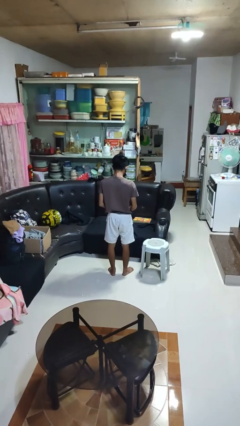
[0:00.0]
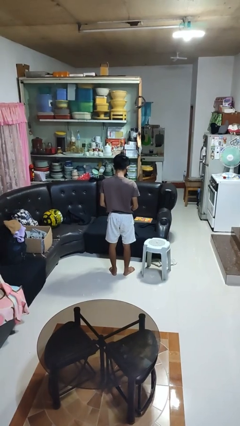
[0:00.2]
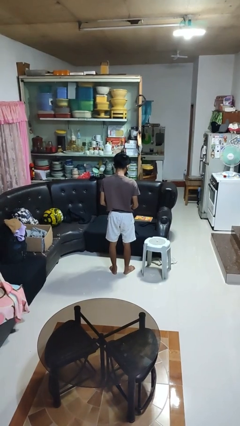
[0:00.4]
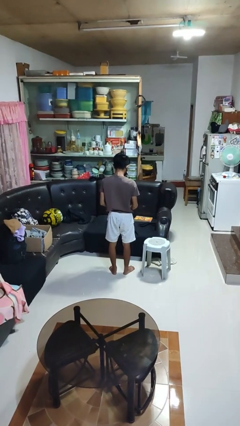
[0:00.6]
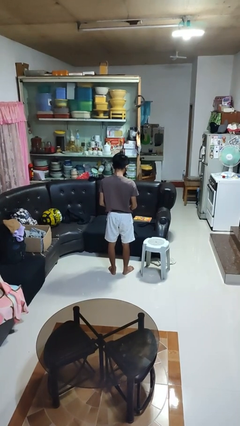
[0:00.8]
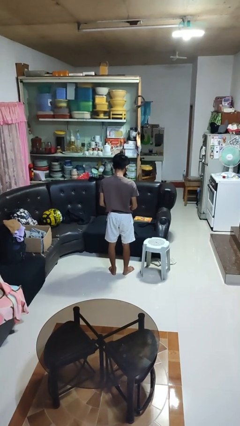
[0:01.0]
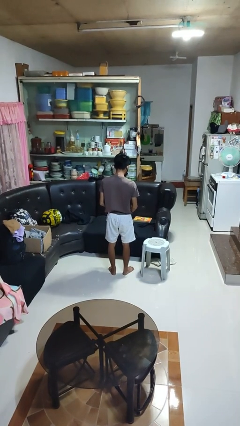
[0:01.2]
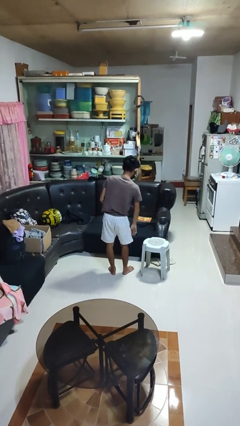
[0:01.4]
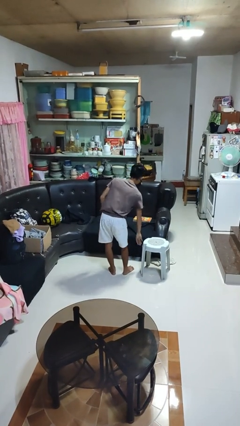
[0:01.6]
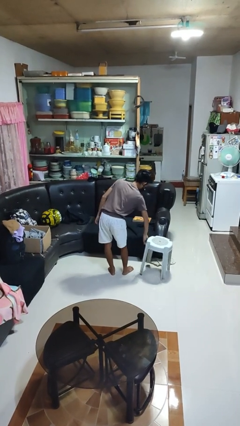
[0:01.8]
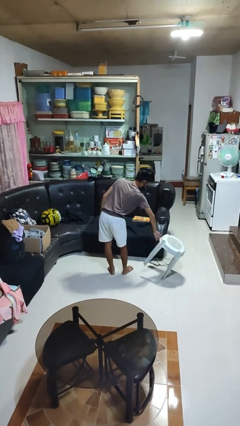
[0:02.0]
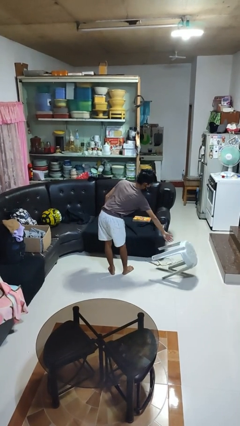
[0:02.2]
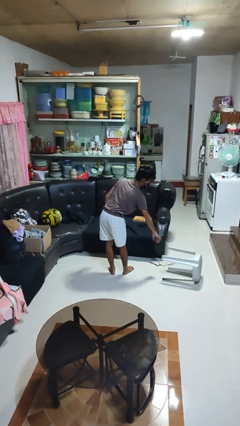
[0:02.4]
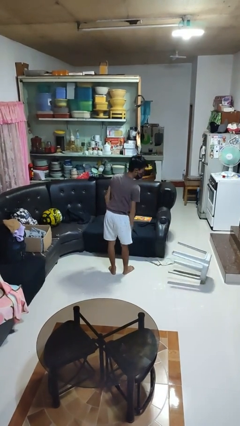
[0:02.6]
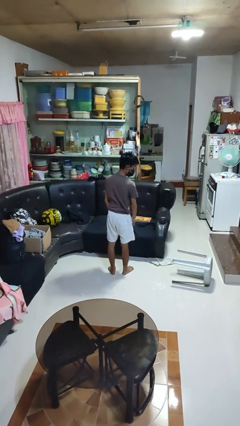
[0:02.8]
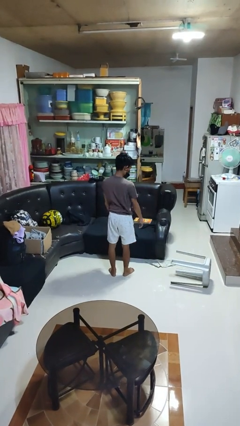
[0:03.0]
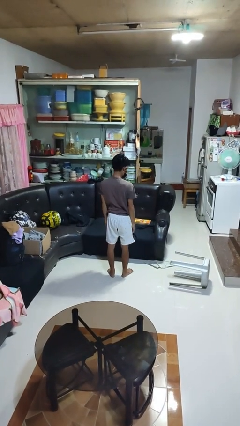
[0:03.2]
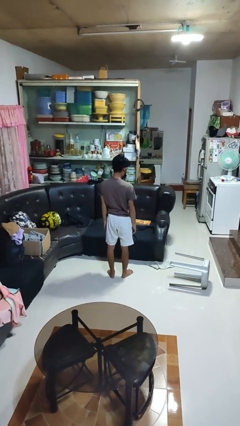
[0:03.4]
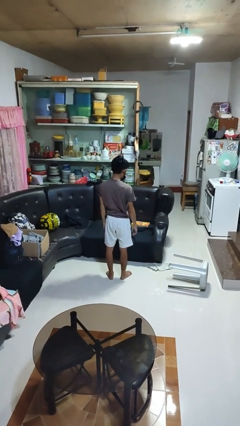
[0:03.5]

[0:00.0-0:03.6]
person knocks over furniture

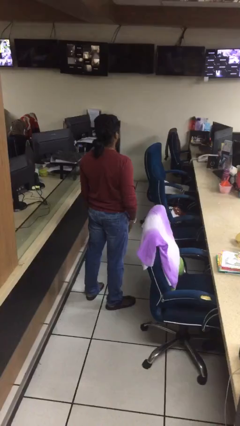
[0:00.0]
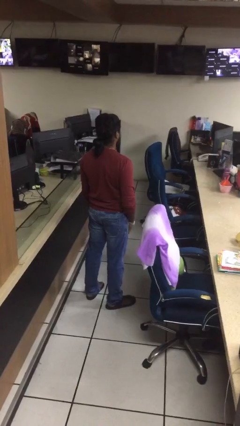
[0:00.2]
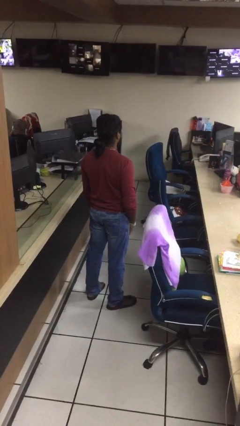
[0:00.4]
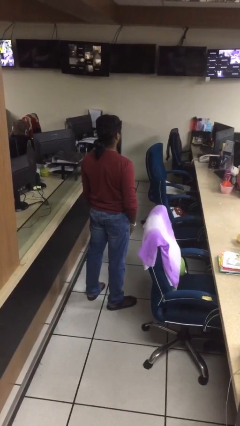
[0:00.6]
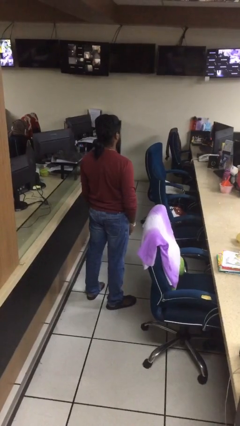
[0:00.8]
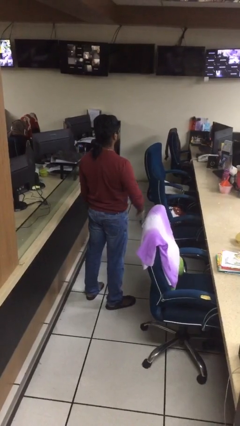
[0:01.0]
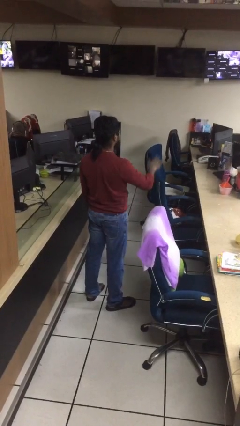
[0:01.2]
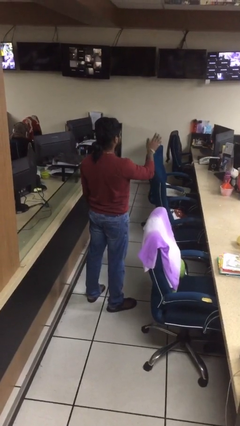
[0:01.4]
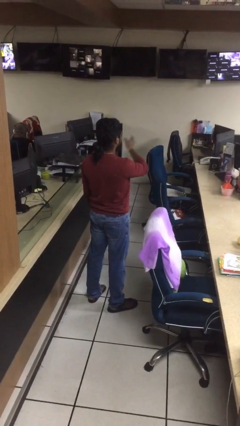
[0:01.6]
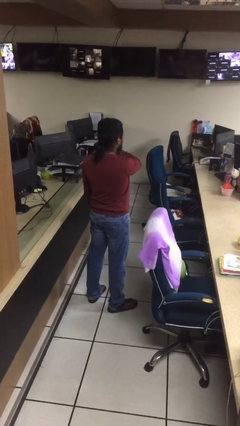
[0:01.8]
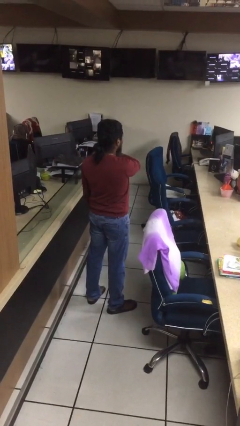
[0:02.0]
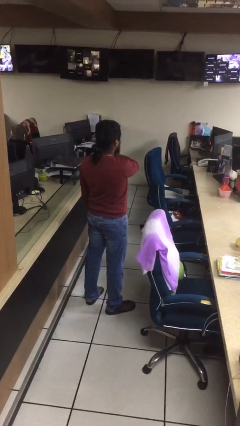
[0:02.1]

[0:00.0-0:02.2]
person gestures swipe left

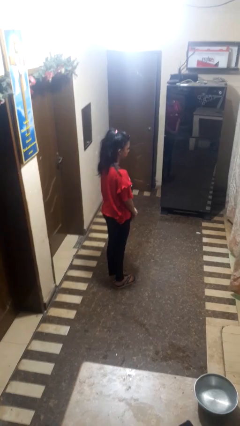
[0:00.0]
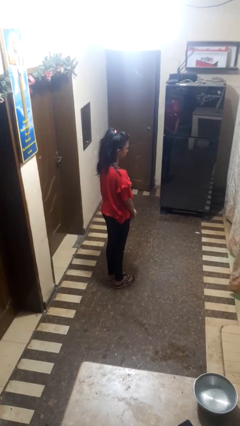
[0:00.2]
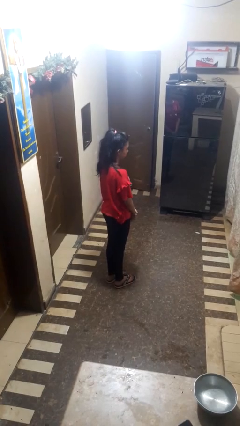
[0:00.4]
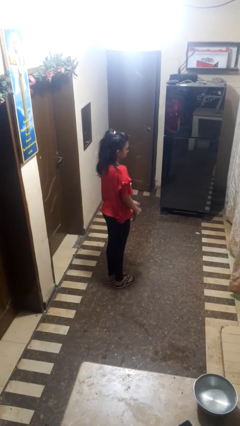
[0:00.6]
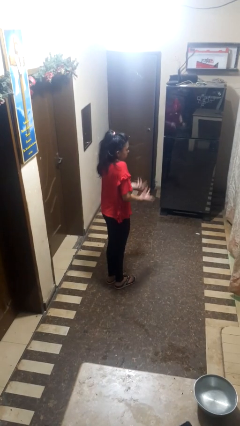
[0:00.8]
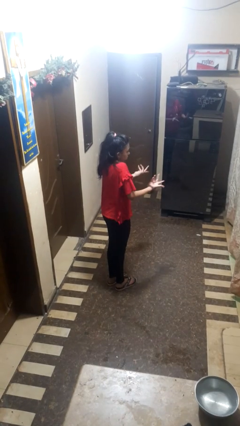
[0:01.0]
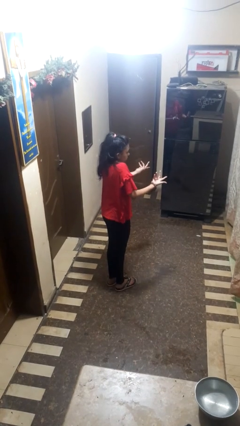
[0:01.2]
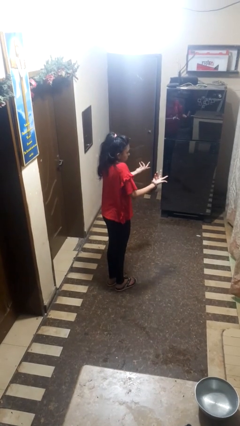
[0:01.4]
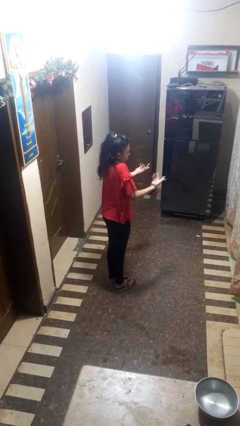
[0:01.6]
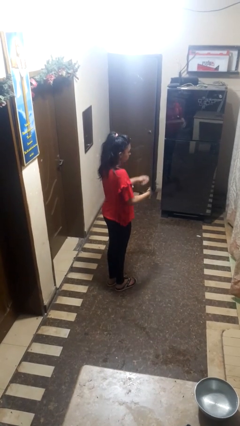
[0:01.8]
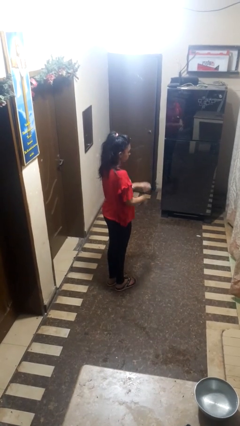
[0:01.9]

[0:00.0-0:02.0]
person shrugs

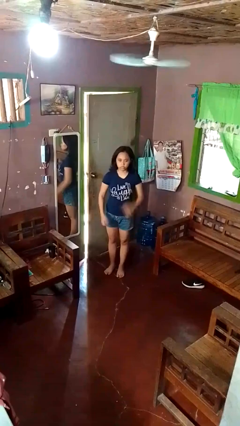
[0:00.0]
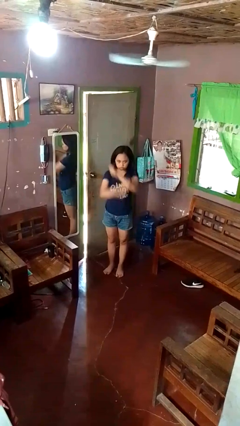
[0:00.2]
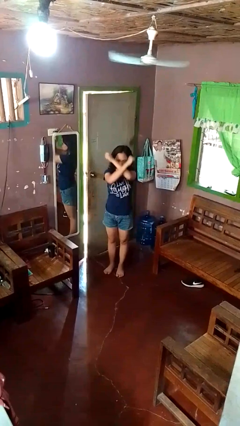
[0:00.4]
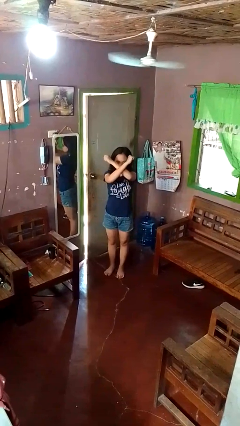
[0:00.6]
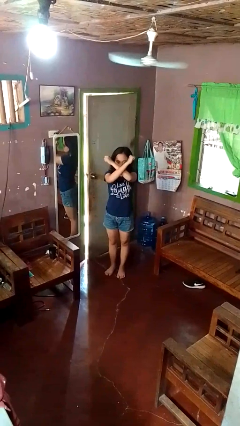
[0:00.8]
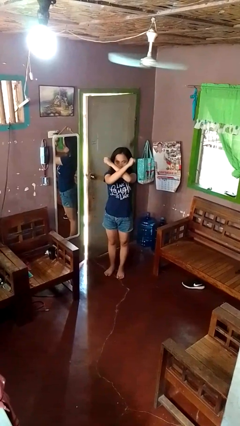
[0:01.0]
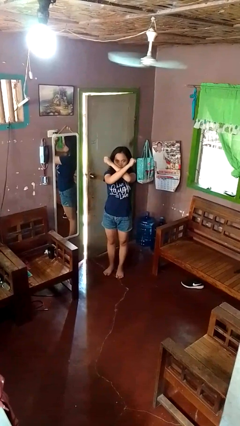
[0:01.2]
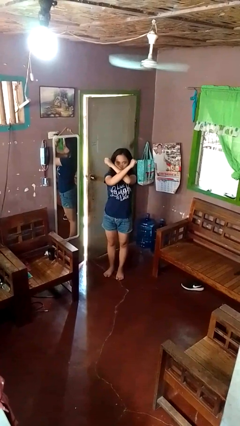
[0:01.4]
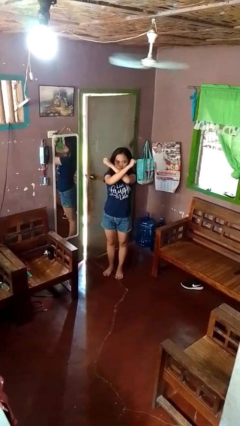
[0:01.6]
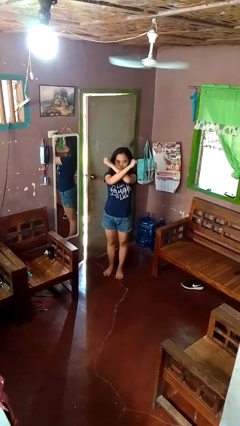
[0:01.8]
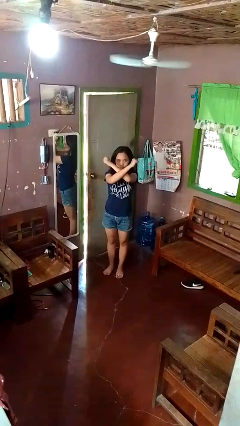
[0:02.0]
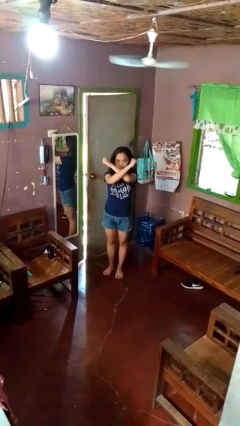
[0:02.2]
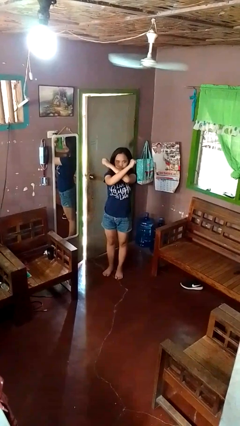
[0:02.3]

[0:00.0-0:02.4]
person gestures arms x

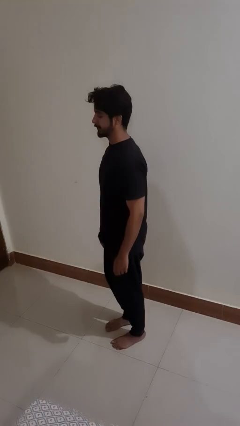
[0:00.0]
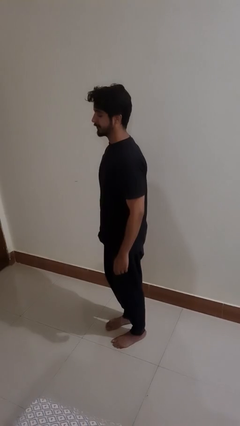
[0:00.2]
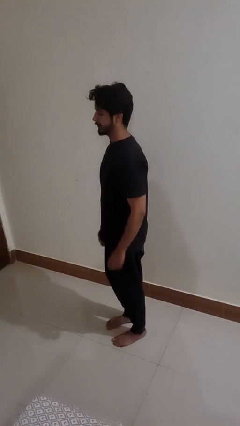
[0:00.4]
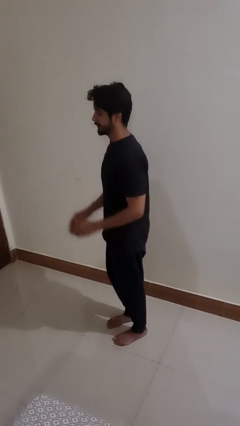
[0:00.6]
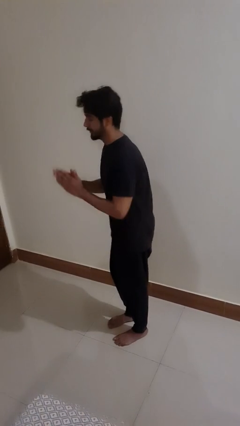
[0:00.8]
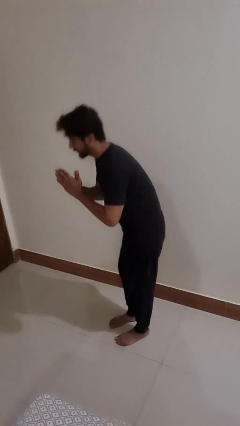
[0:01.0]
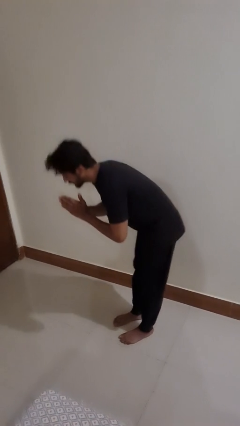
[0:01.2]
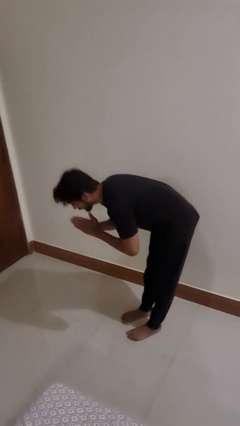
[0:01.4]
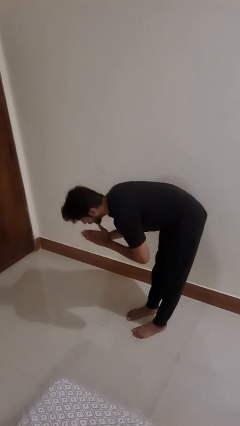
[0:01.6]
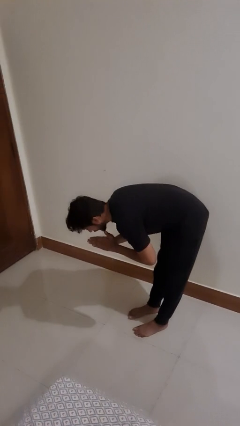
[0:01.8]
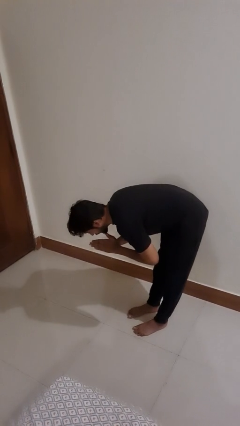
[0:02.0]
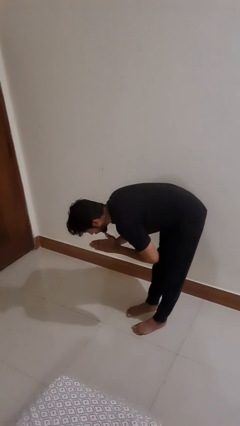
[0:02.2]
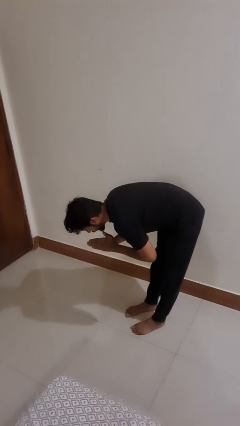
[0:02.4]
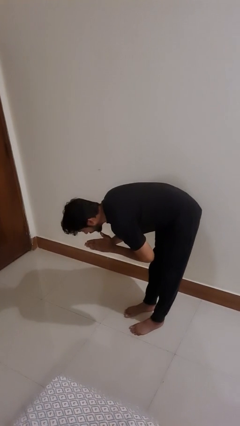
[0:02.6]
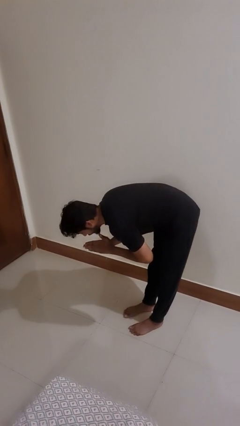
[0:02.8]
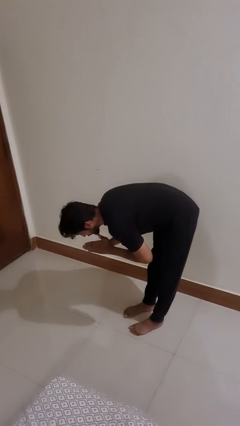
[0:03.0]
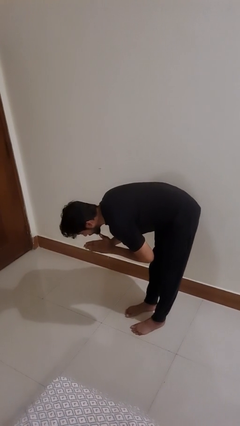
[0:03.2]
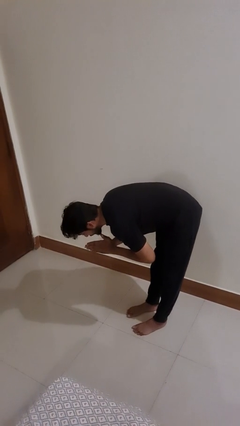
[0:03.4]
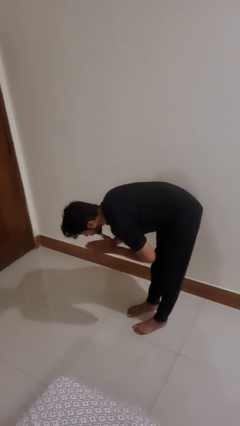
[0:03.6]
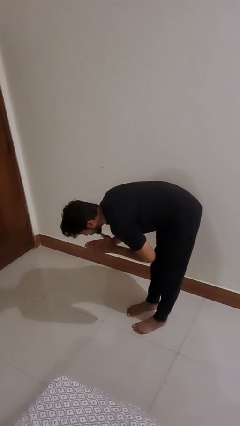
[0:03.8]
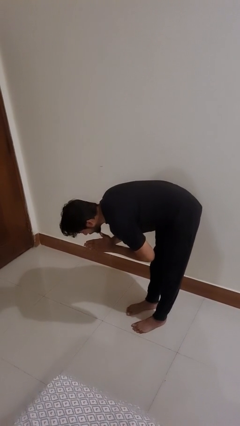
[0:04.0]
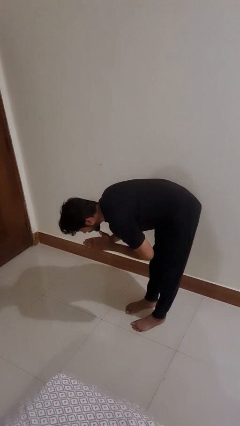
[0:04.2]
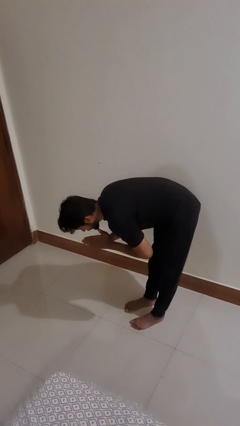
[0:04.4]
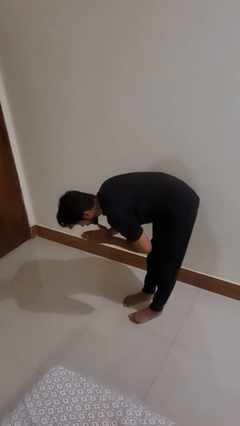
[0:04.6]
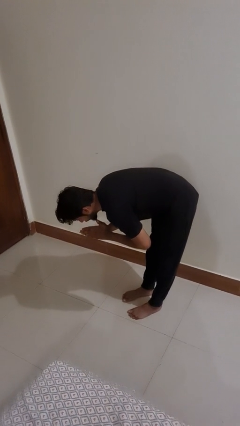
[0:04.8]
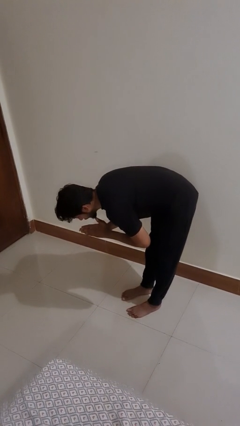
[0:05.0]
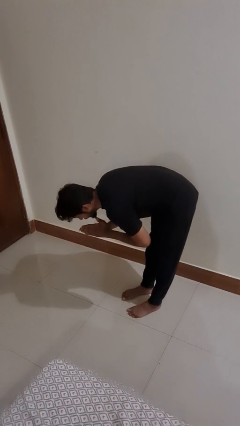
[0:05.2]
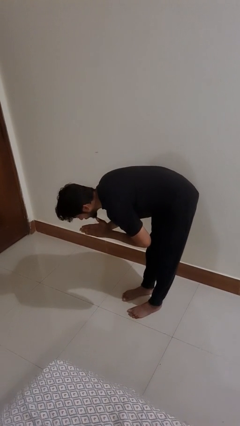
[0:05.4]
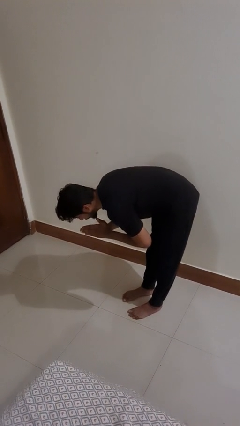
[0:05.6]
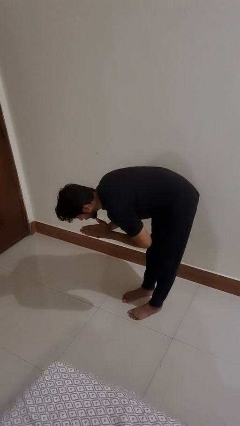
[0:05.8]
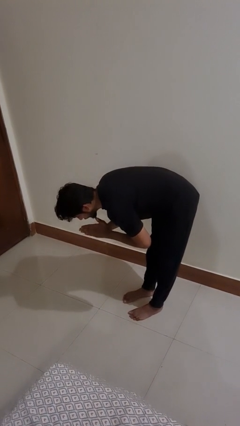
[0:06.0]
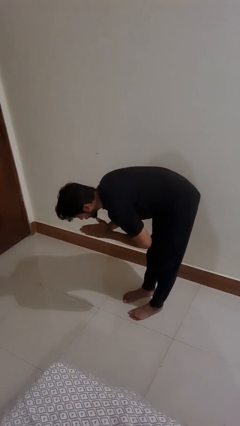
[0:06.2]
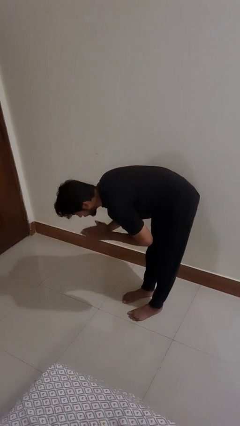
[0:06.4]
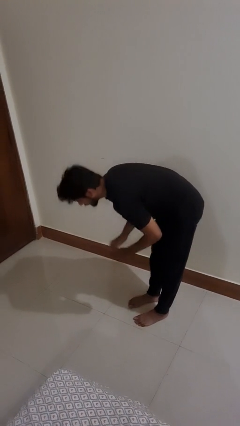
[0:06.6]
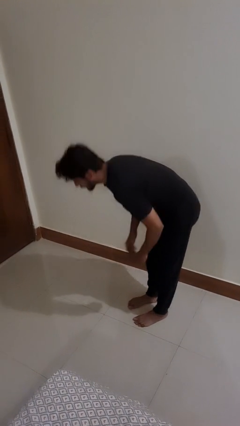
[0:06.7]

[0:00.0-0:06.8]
person bows

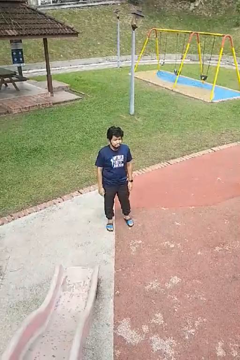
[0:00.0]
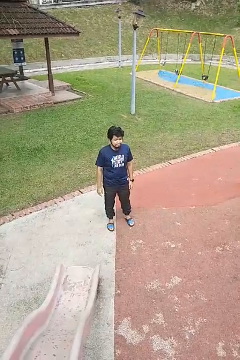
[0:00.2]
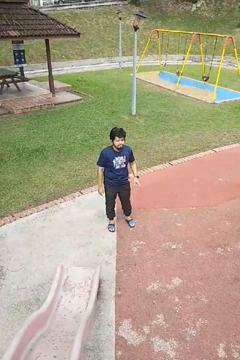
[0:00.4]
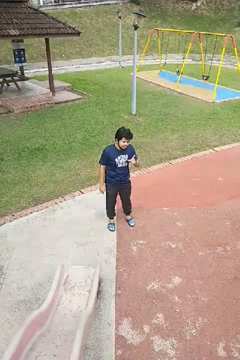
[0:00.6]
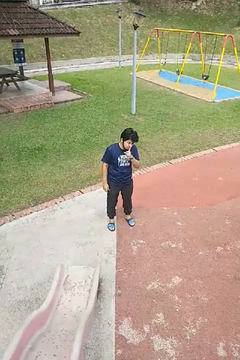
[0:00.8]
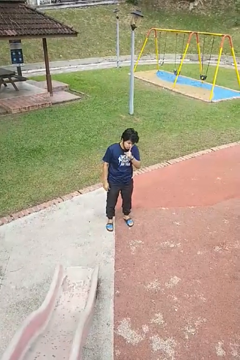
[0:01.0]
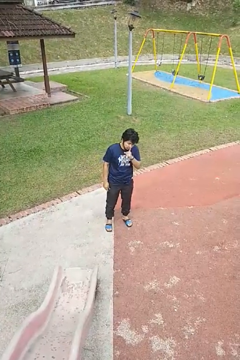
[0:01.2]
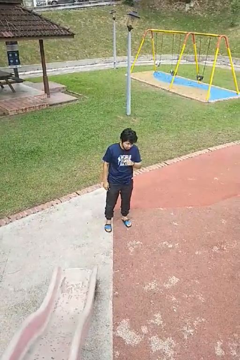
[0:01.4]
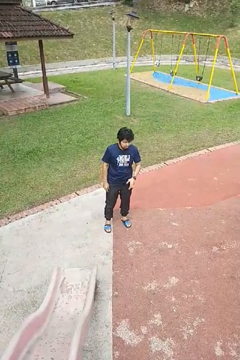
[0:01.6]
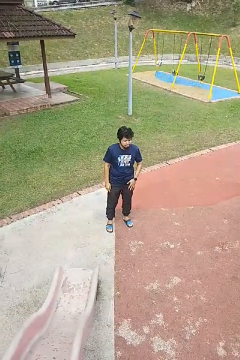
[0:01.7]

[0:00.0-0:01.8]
person gestures be quiet